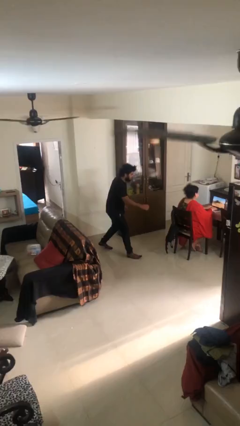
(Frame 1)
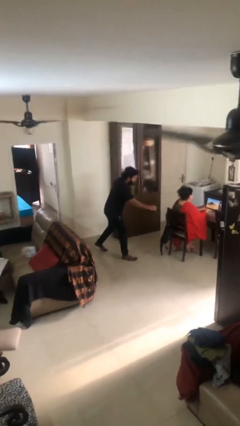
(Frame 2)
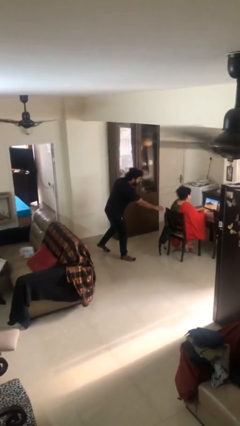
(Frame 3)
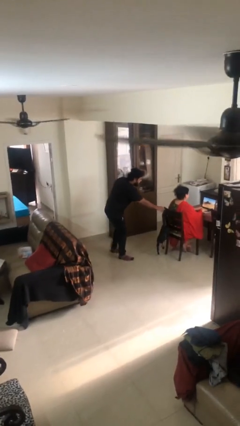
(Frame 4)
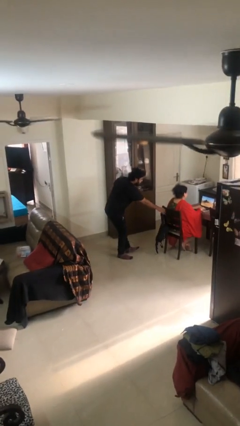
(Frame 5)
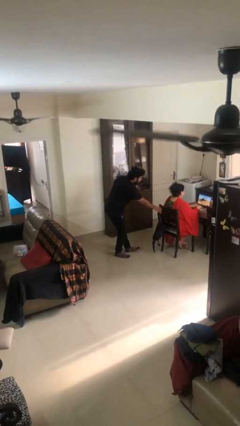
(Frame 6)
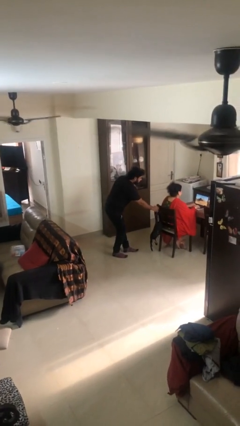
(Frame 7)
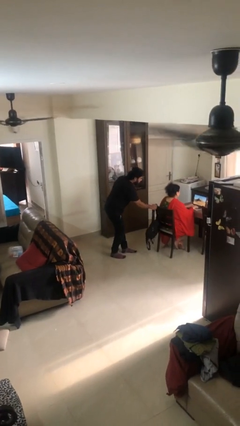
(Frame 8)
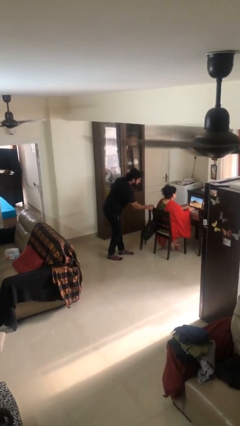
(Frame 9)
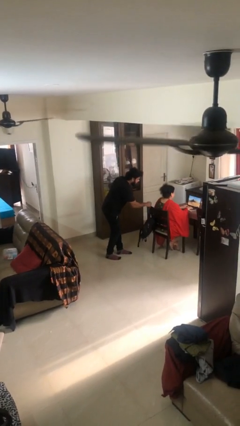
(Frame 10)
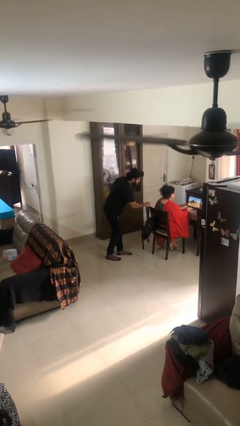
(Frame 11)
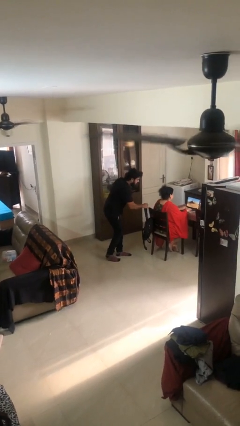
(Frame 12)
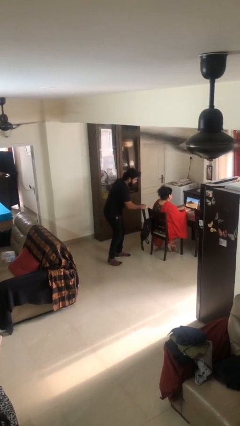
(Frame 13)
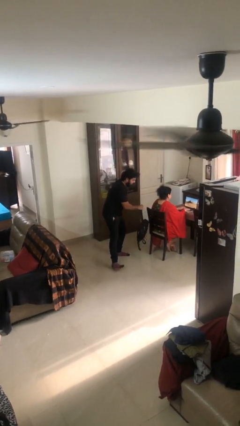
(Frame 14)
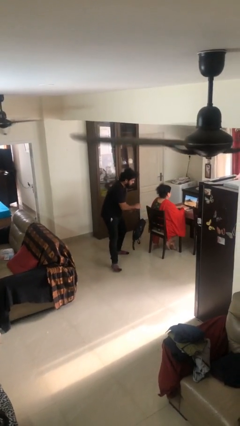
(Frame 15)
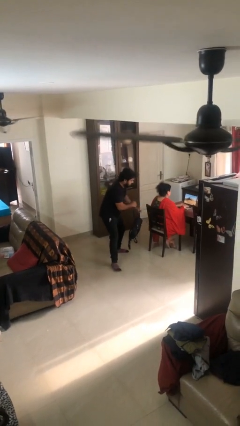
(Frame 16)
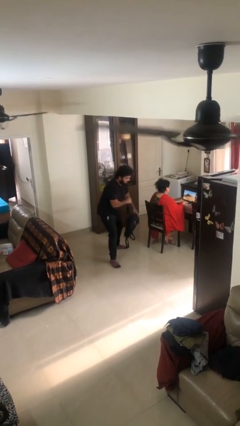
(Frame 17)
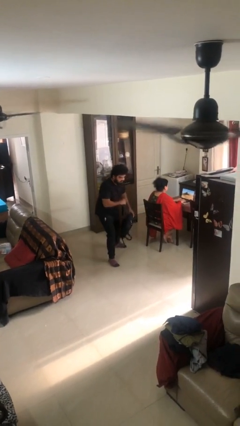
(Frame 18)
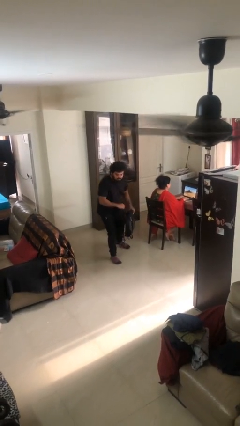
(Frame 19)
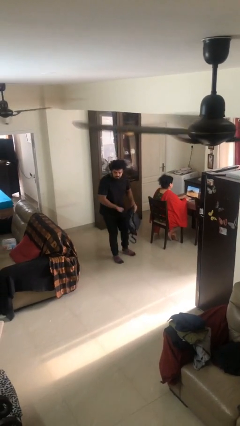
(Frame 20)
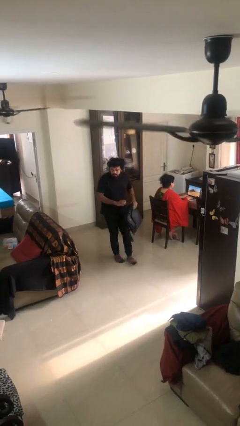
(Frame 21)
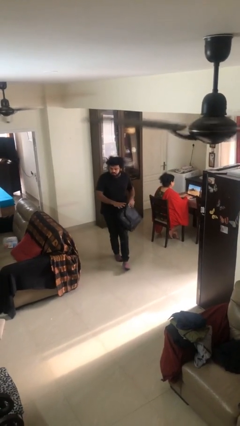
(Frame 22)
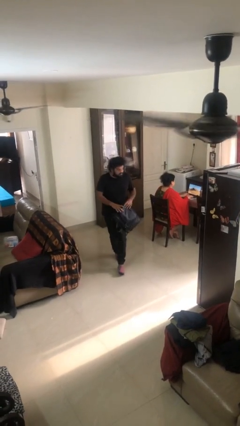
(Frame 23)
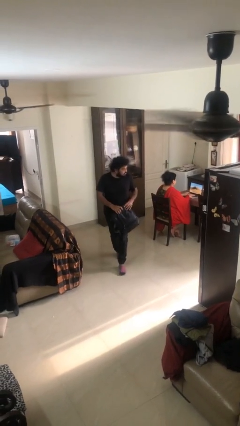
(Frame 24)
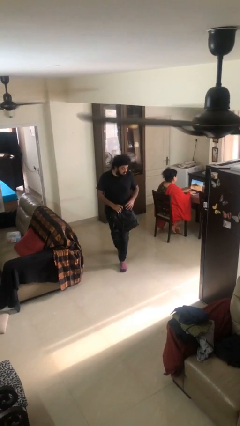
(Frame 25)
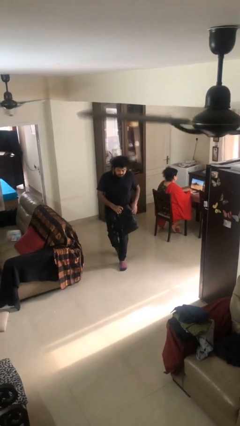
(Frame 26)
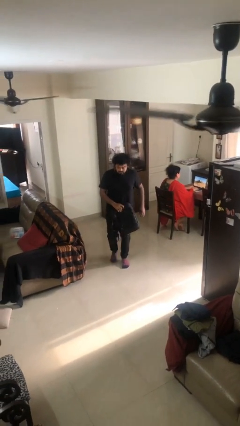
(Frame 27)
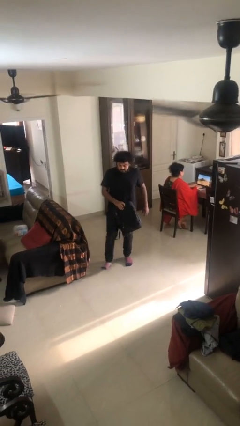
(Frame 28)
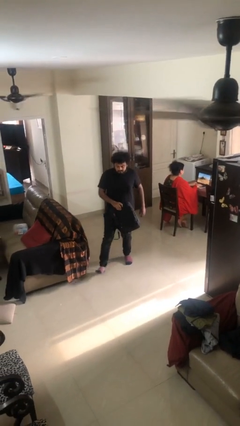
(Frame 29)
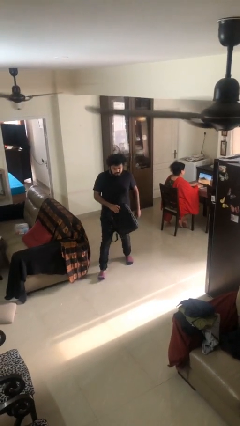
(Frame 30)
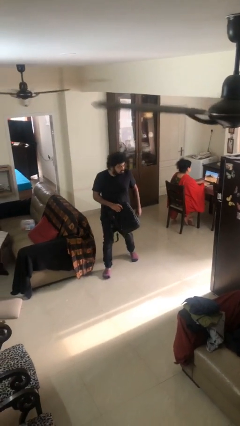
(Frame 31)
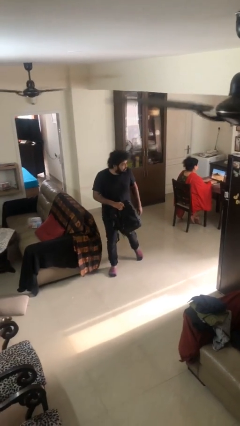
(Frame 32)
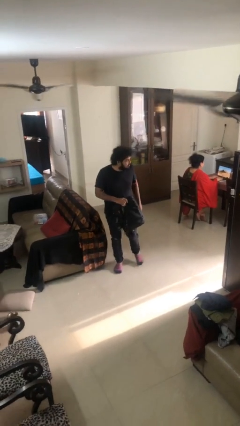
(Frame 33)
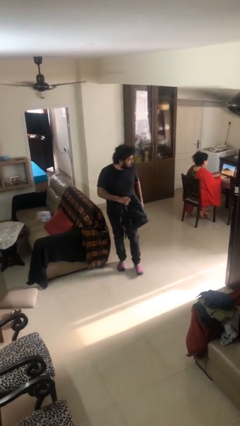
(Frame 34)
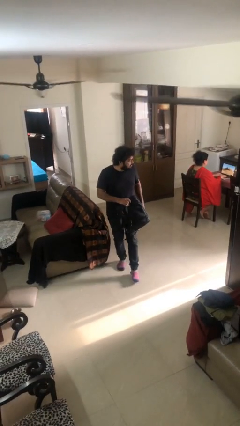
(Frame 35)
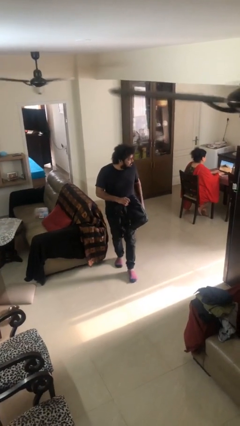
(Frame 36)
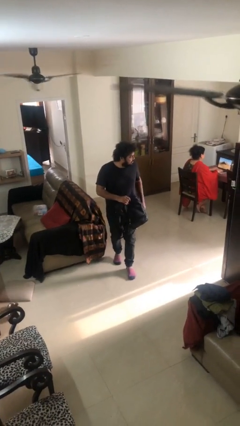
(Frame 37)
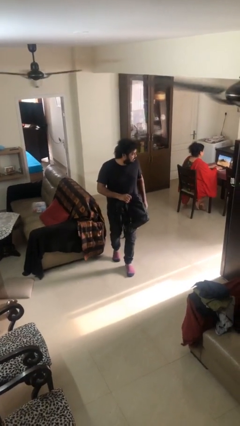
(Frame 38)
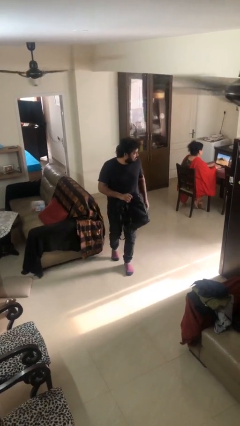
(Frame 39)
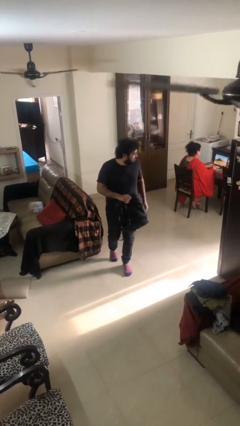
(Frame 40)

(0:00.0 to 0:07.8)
person steals object from person

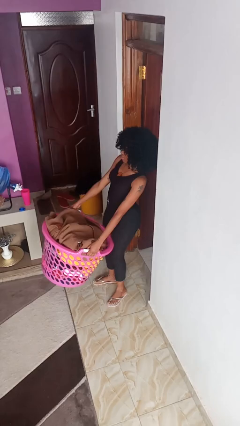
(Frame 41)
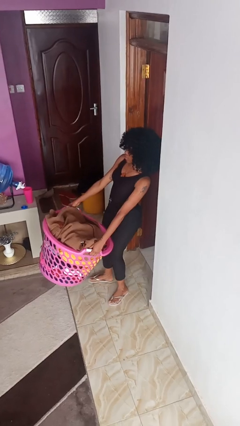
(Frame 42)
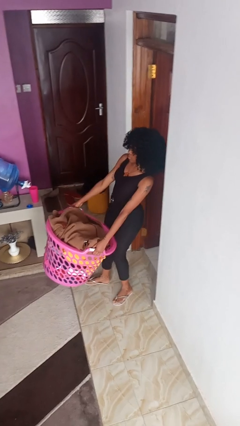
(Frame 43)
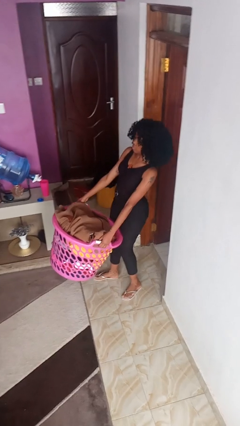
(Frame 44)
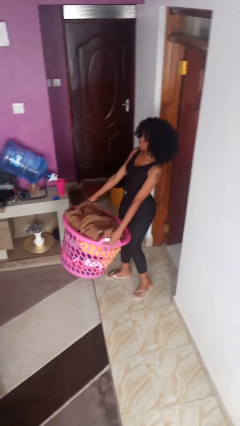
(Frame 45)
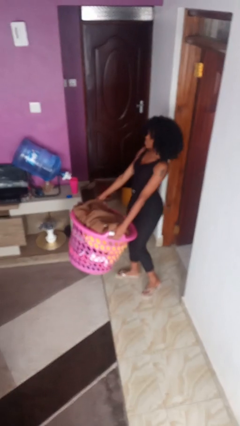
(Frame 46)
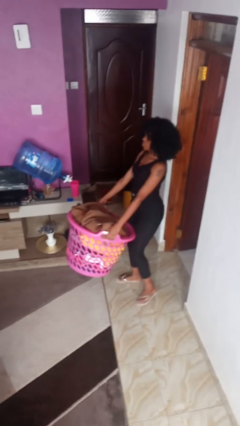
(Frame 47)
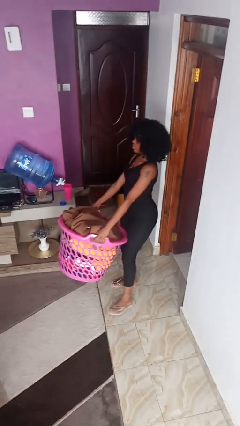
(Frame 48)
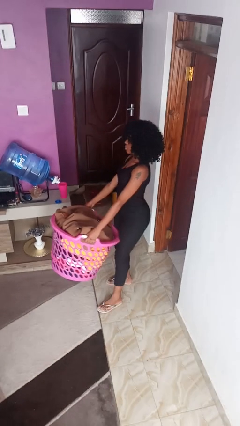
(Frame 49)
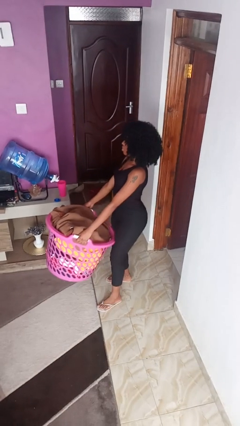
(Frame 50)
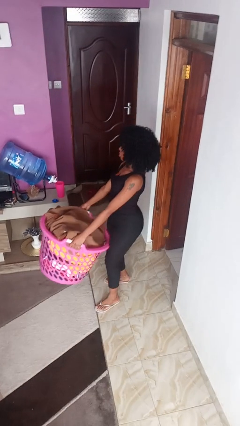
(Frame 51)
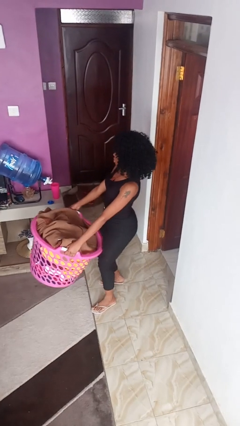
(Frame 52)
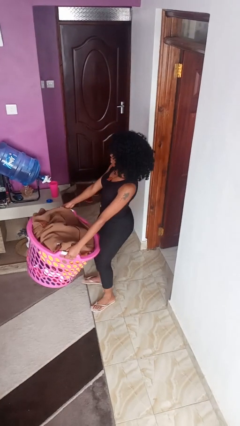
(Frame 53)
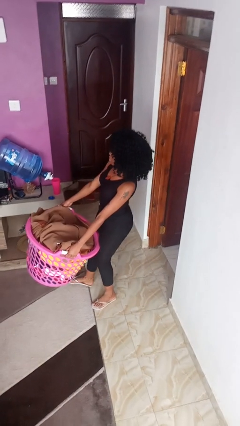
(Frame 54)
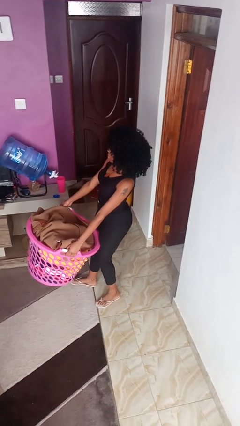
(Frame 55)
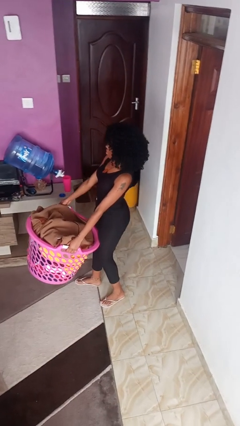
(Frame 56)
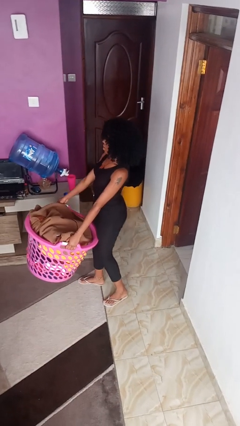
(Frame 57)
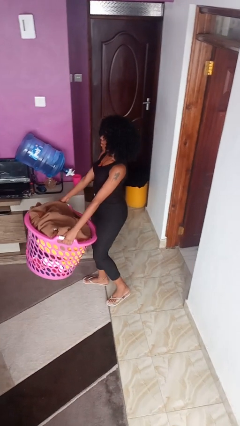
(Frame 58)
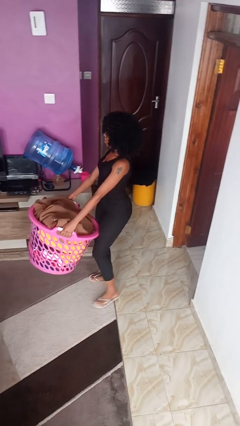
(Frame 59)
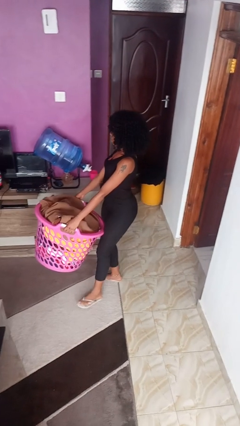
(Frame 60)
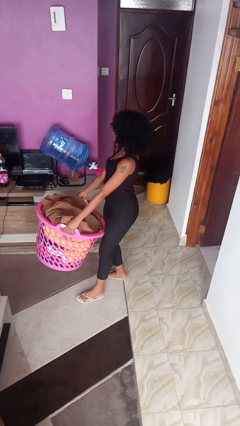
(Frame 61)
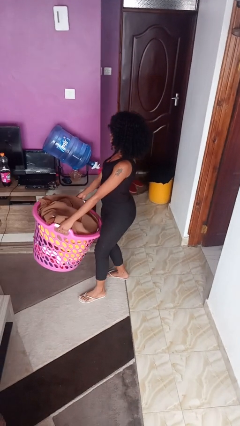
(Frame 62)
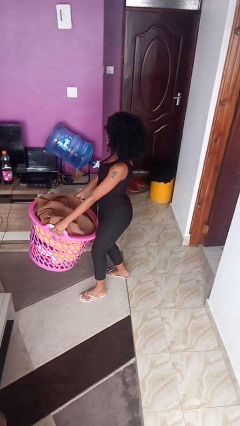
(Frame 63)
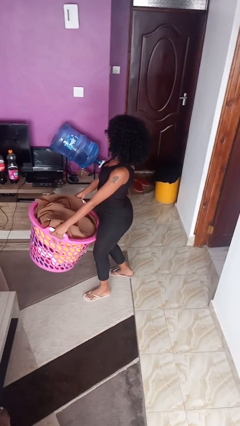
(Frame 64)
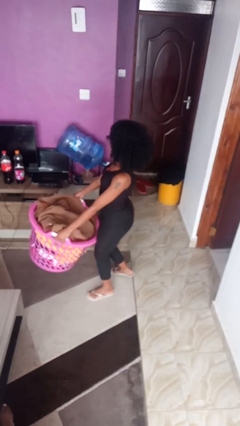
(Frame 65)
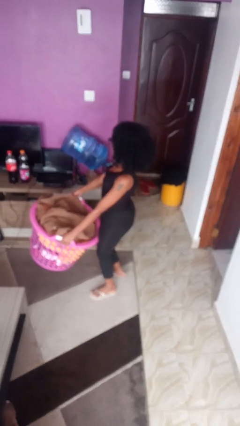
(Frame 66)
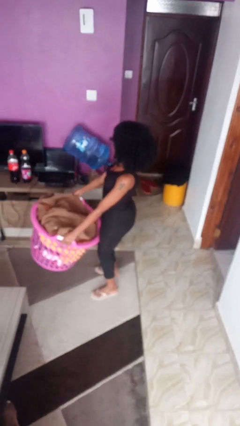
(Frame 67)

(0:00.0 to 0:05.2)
person carries laundry basket

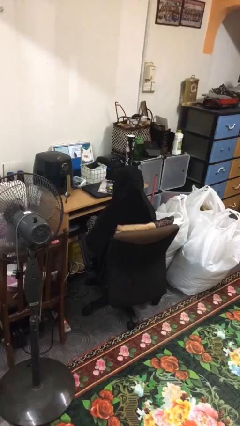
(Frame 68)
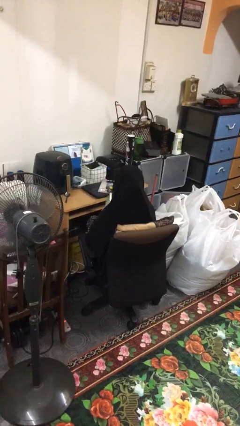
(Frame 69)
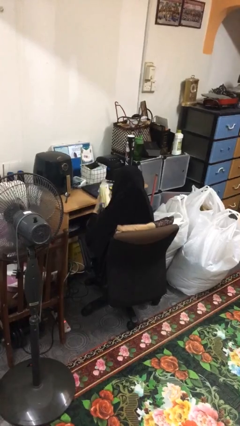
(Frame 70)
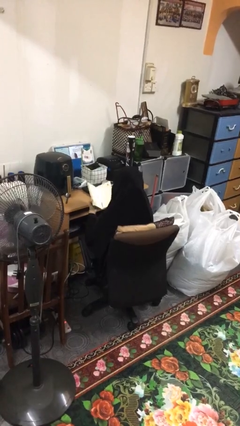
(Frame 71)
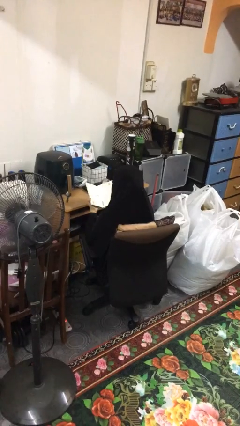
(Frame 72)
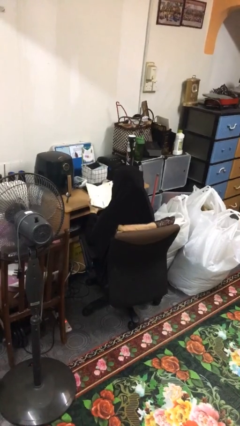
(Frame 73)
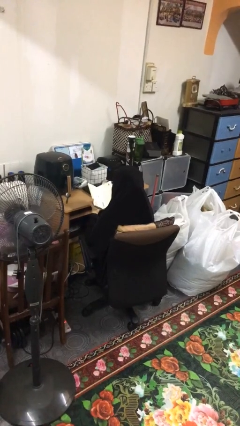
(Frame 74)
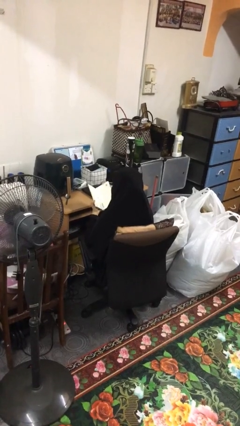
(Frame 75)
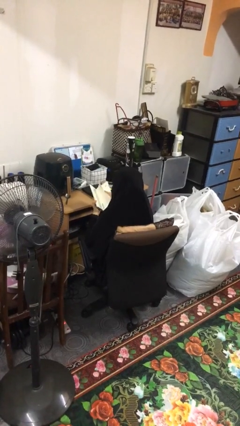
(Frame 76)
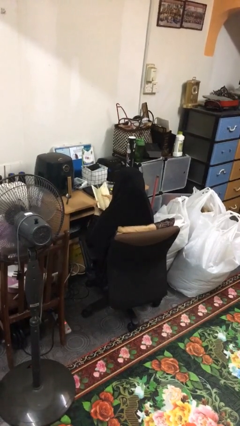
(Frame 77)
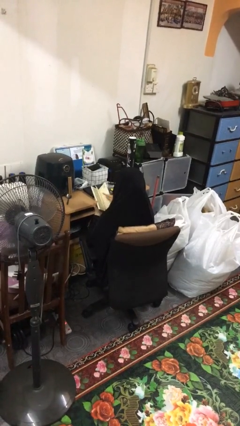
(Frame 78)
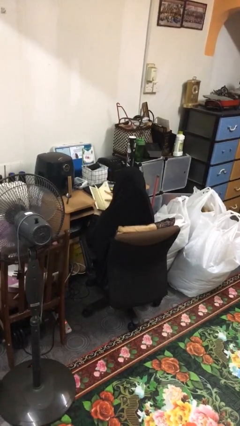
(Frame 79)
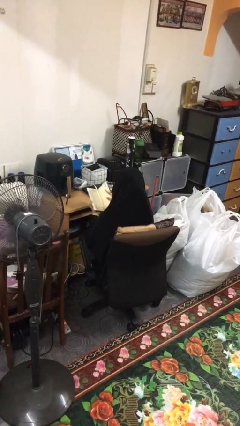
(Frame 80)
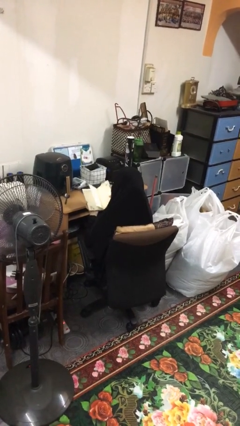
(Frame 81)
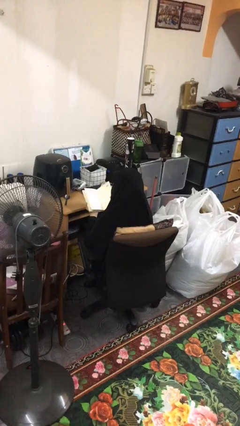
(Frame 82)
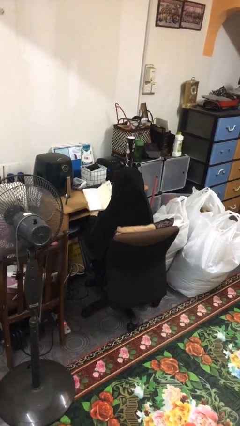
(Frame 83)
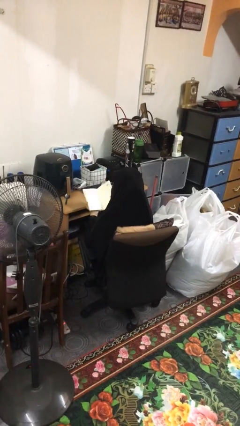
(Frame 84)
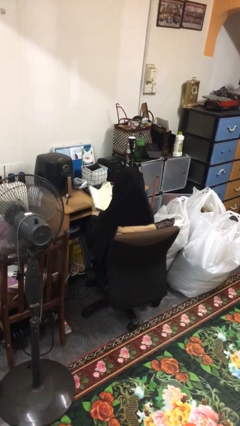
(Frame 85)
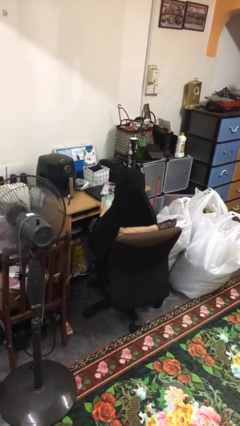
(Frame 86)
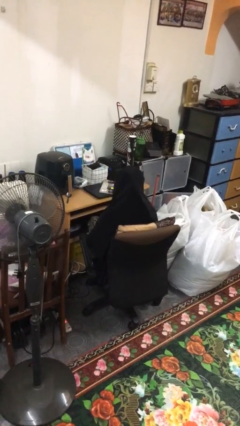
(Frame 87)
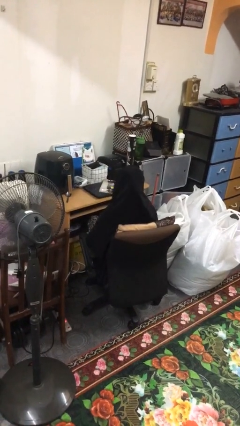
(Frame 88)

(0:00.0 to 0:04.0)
person reads book

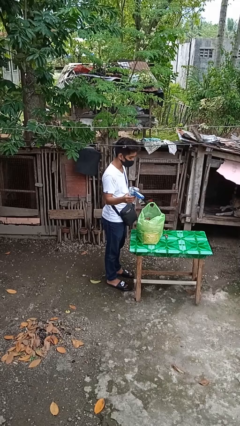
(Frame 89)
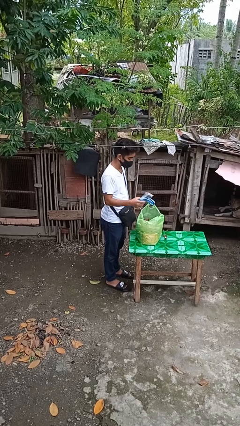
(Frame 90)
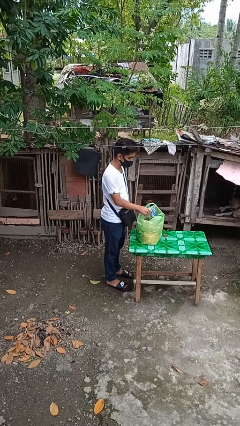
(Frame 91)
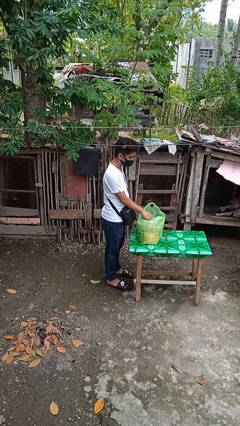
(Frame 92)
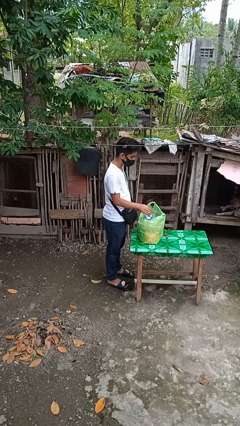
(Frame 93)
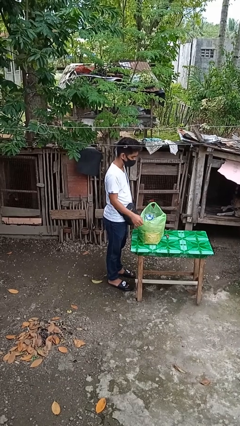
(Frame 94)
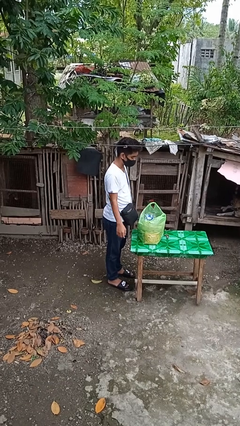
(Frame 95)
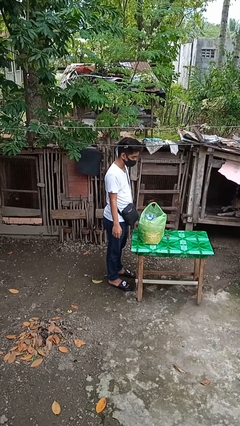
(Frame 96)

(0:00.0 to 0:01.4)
person puts object into bag
